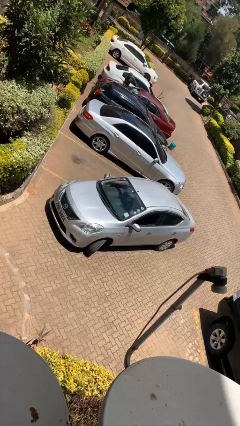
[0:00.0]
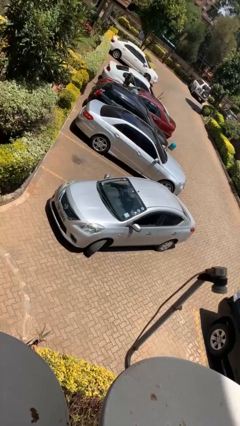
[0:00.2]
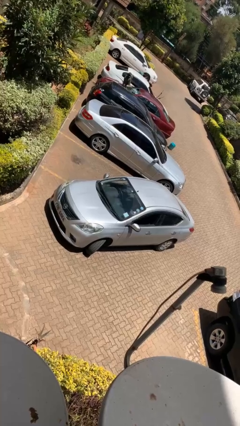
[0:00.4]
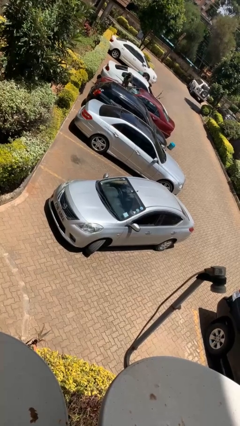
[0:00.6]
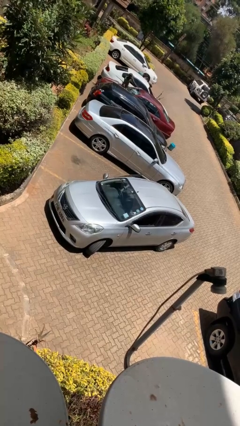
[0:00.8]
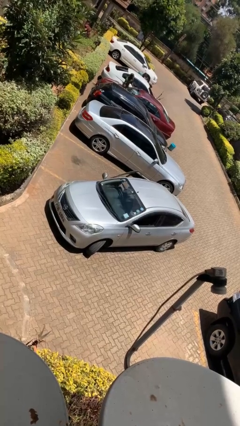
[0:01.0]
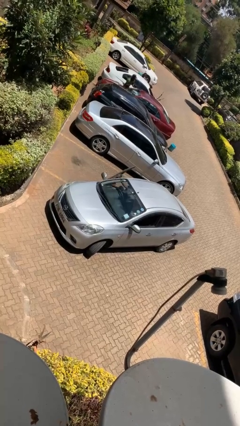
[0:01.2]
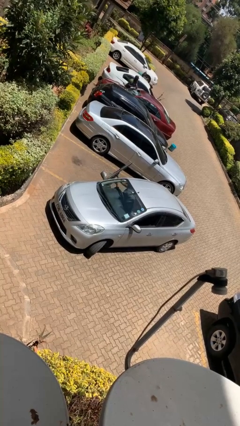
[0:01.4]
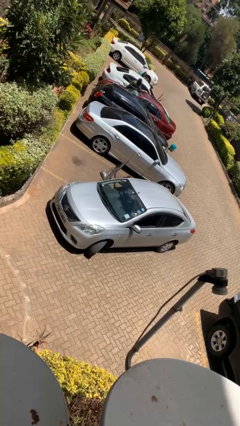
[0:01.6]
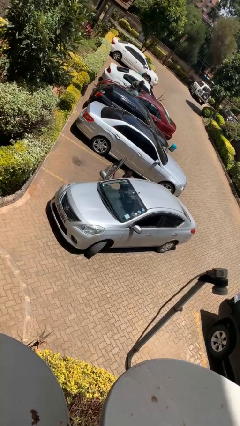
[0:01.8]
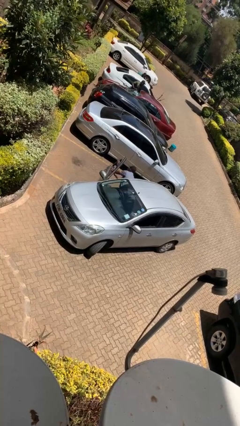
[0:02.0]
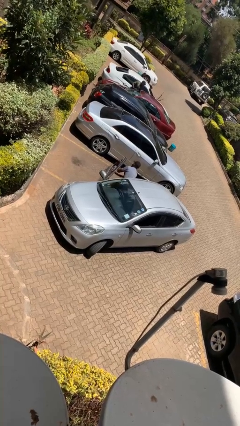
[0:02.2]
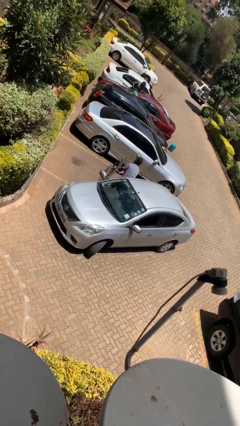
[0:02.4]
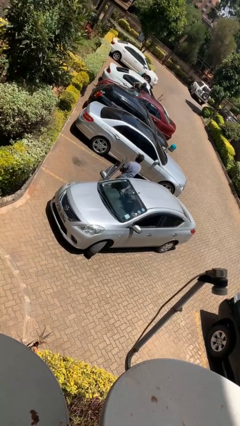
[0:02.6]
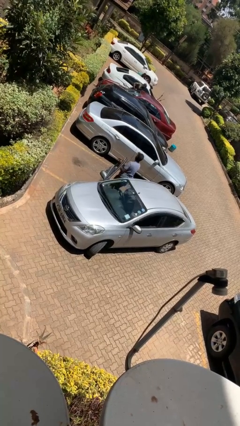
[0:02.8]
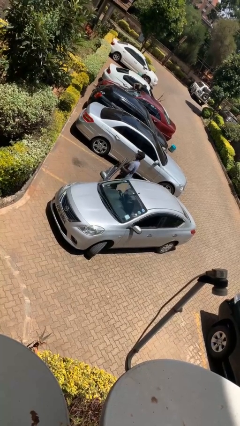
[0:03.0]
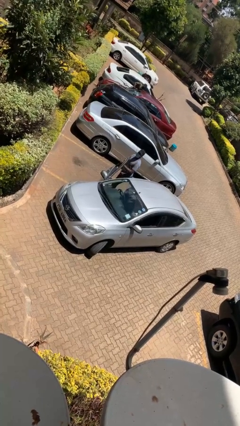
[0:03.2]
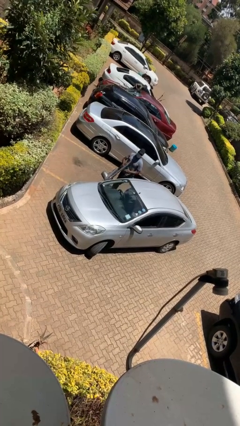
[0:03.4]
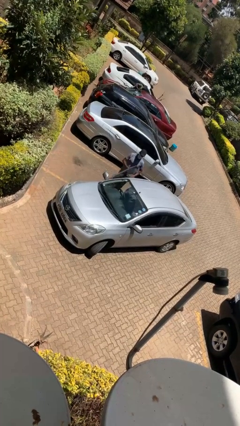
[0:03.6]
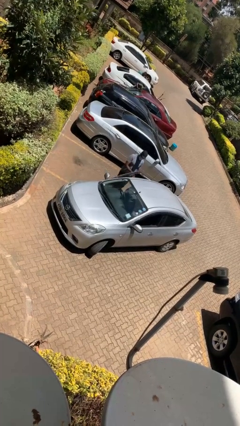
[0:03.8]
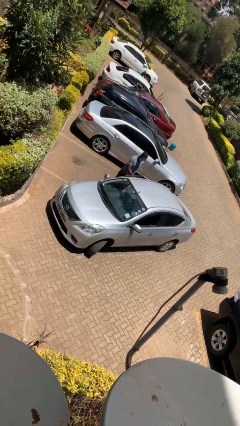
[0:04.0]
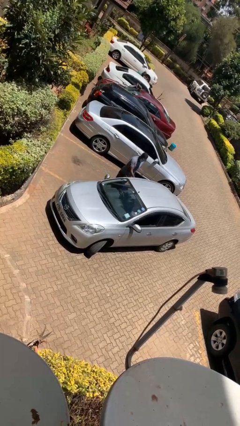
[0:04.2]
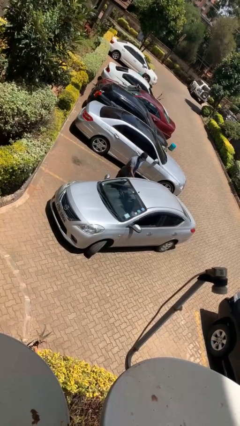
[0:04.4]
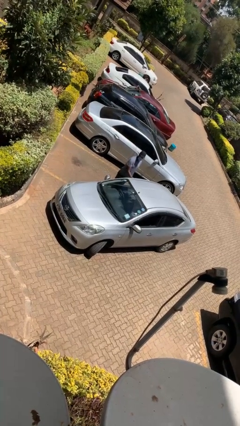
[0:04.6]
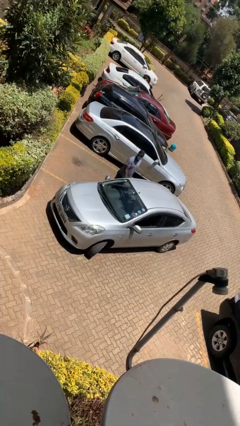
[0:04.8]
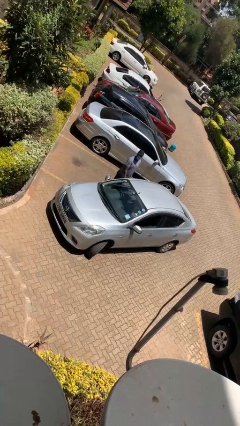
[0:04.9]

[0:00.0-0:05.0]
car drops off person

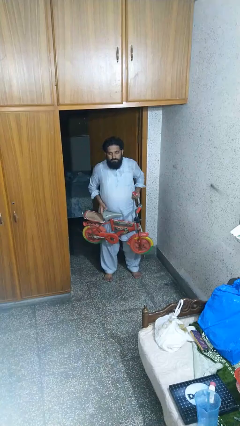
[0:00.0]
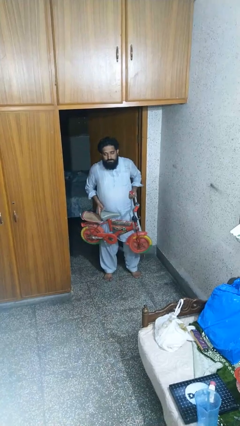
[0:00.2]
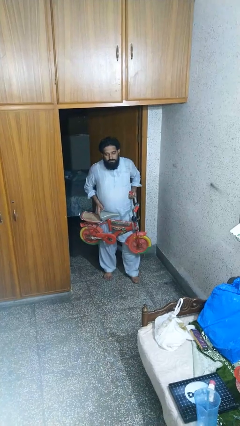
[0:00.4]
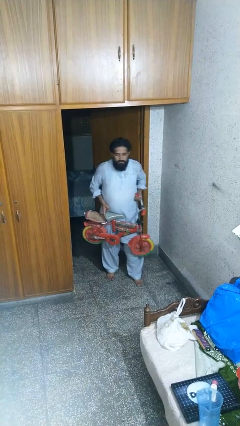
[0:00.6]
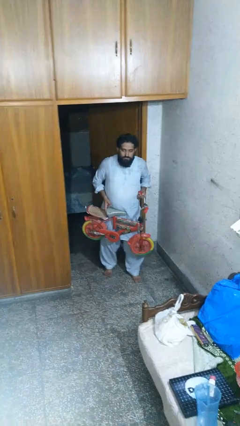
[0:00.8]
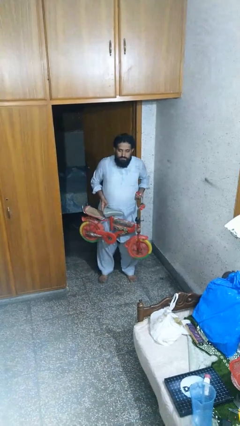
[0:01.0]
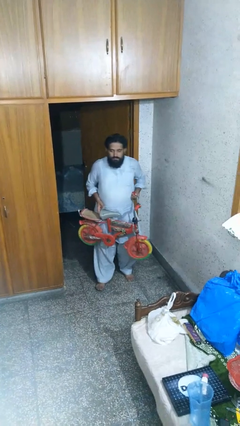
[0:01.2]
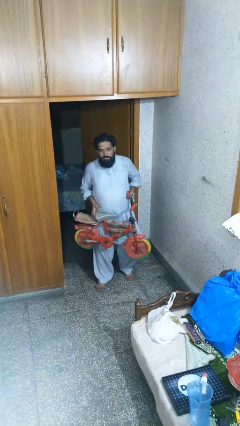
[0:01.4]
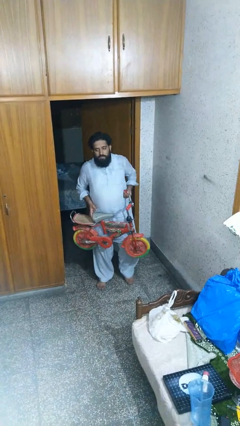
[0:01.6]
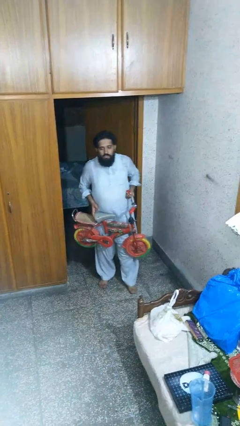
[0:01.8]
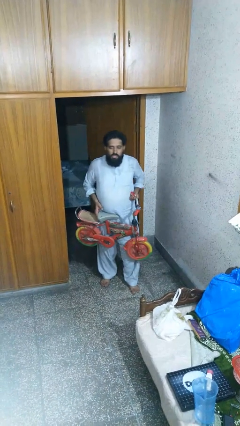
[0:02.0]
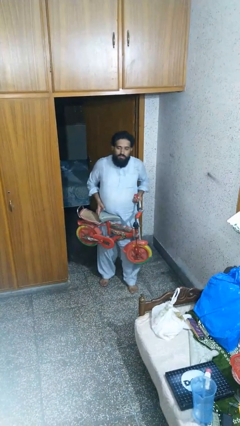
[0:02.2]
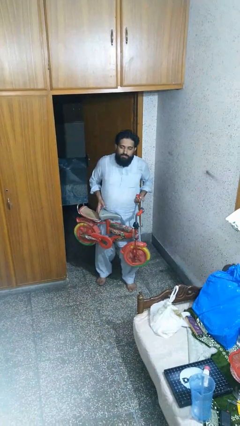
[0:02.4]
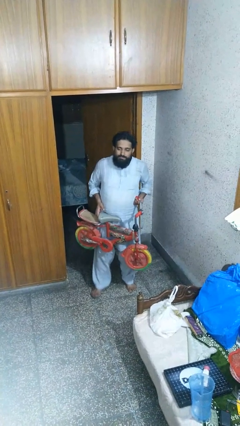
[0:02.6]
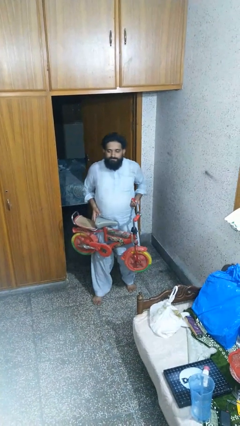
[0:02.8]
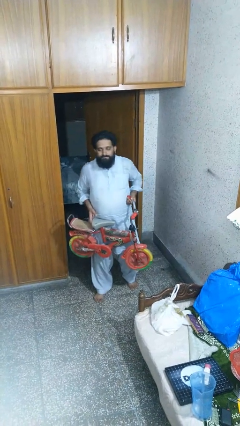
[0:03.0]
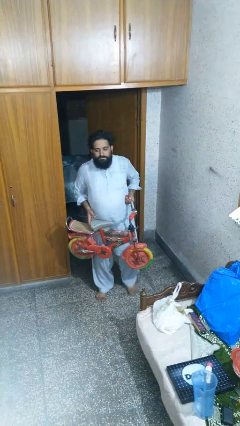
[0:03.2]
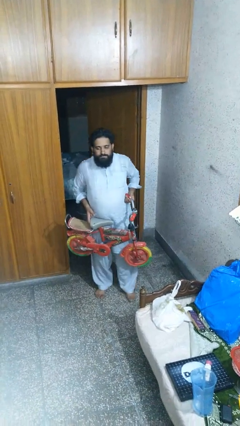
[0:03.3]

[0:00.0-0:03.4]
person carries bicycle

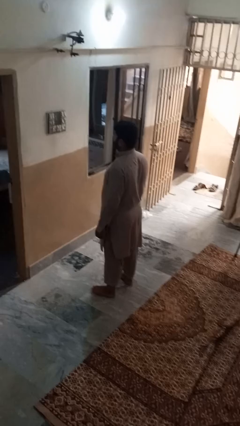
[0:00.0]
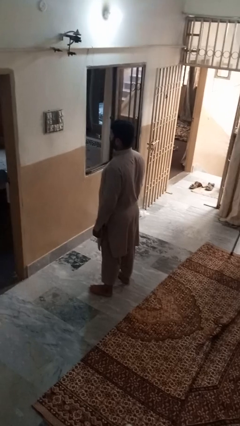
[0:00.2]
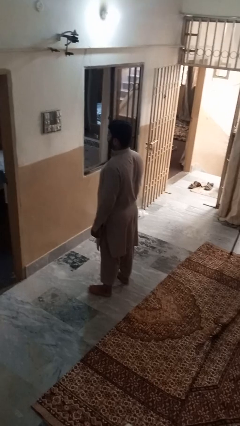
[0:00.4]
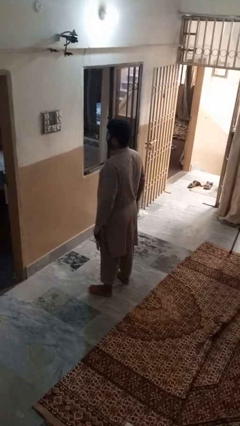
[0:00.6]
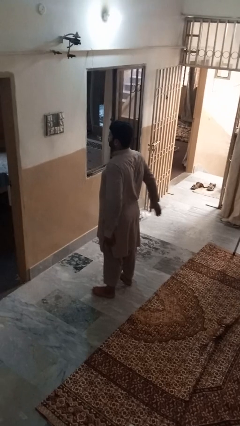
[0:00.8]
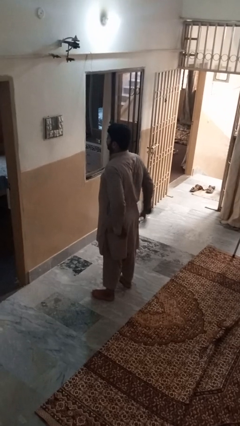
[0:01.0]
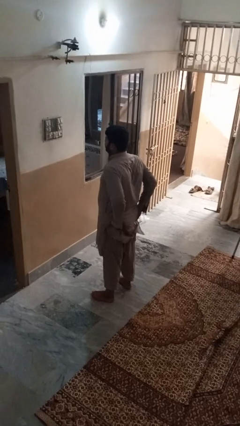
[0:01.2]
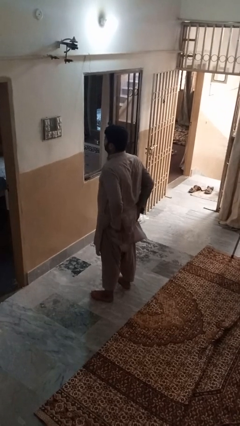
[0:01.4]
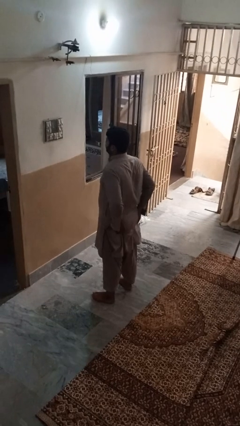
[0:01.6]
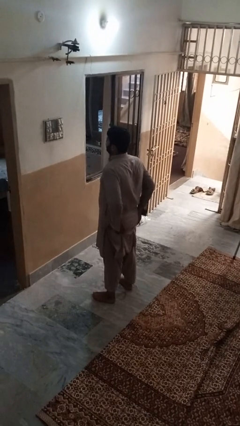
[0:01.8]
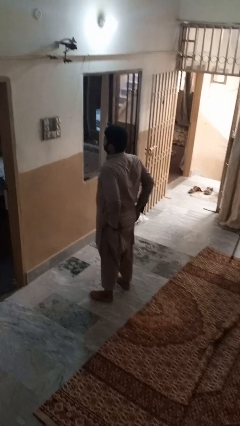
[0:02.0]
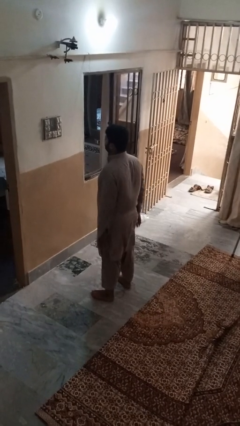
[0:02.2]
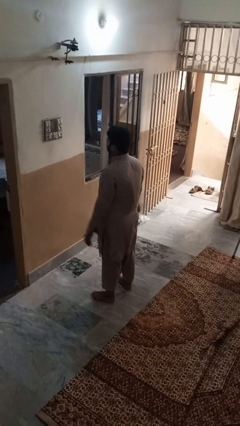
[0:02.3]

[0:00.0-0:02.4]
person wiggles hips

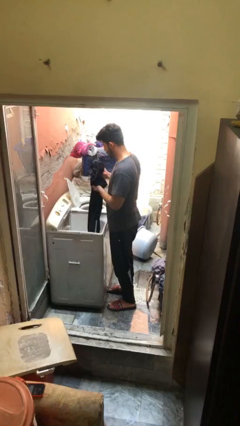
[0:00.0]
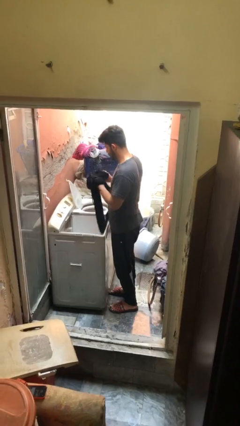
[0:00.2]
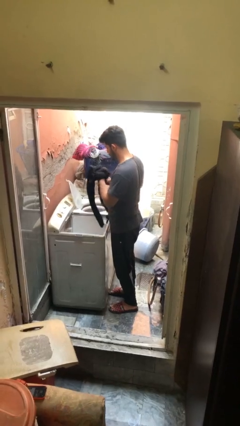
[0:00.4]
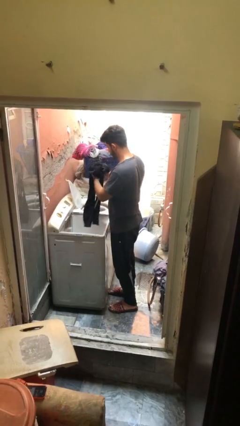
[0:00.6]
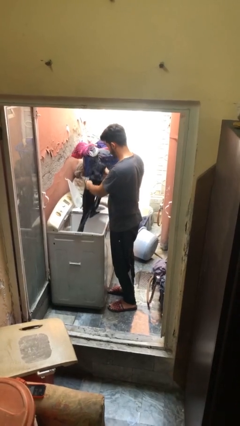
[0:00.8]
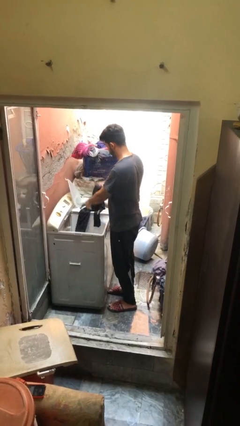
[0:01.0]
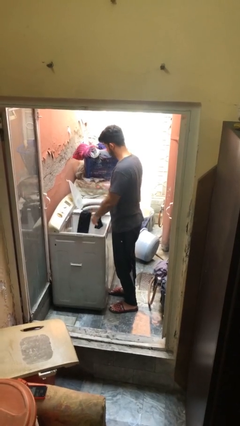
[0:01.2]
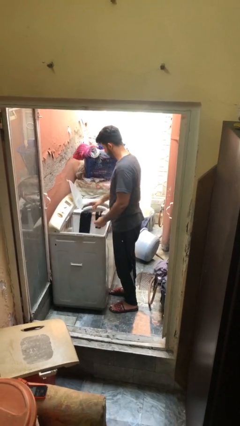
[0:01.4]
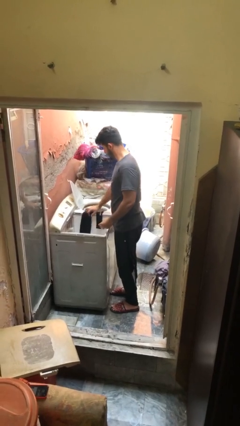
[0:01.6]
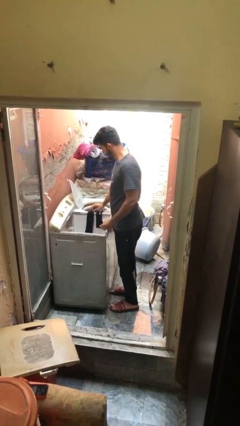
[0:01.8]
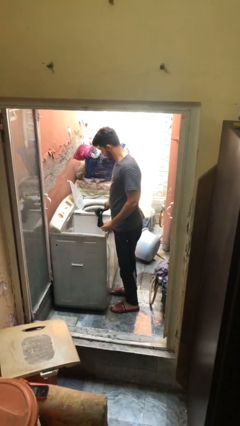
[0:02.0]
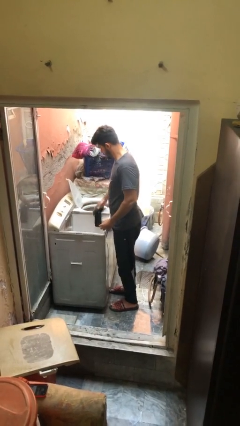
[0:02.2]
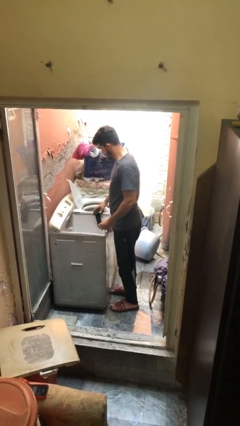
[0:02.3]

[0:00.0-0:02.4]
person loads dryer

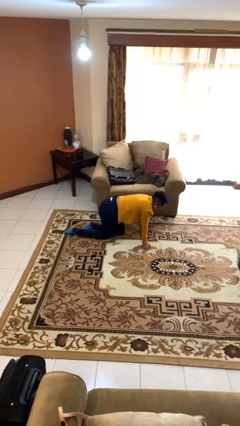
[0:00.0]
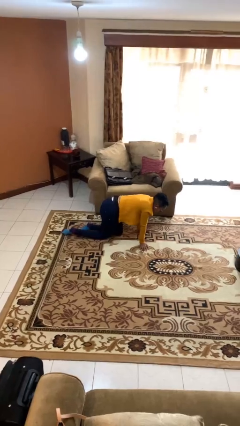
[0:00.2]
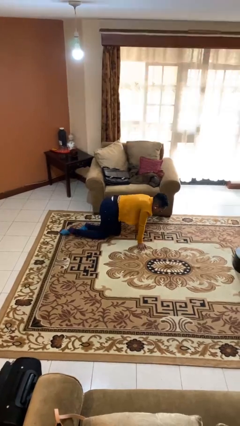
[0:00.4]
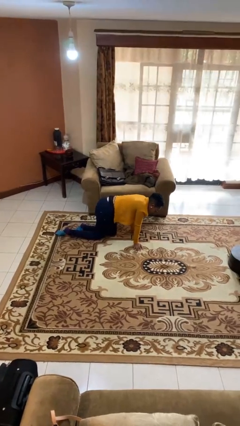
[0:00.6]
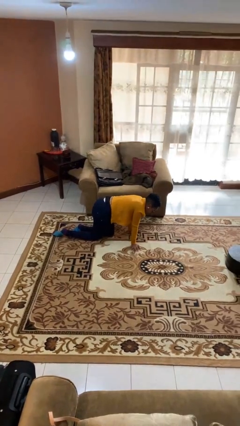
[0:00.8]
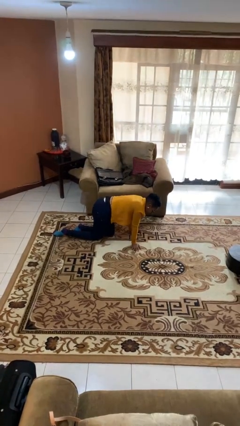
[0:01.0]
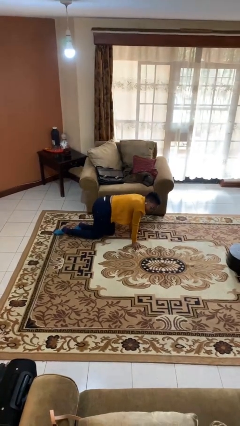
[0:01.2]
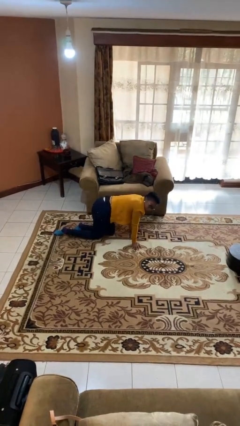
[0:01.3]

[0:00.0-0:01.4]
person crawls

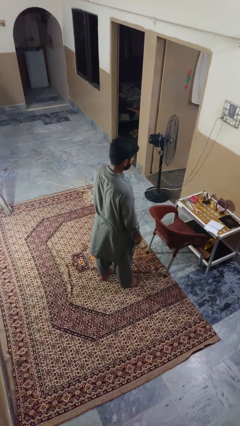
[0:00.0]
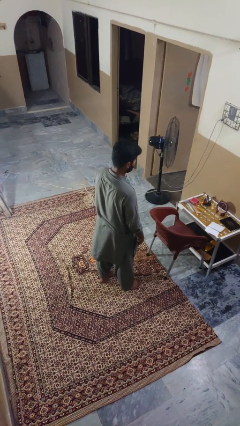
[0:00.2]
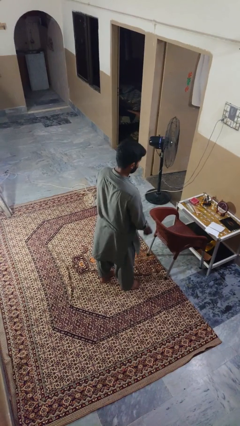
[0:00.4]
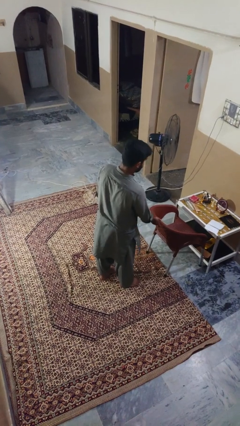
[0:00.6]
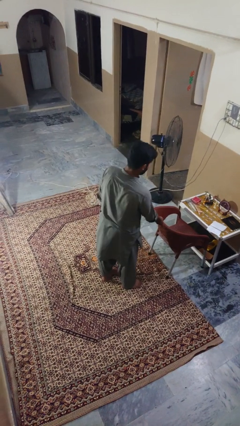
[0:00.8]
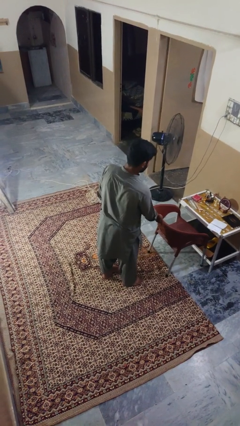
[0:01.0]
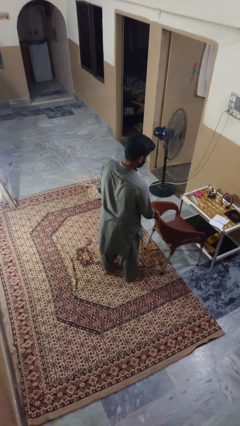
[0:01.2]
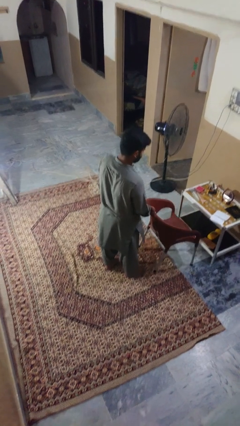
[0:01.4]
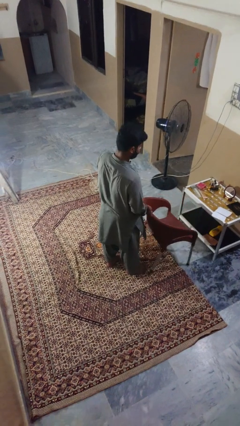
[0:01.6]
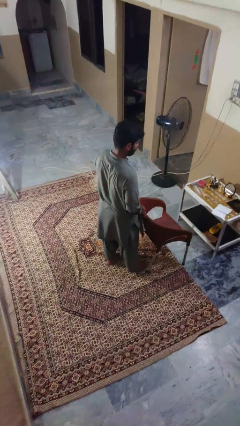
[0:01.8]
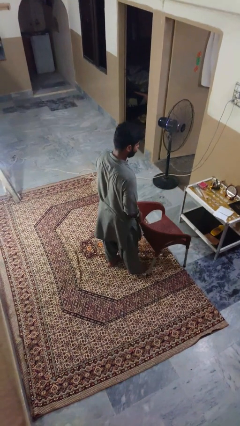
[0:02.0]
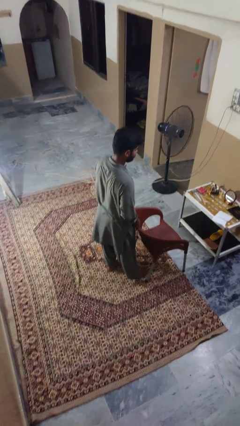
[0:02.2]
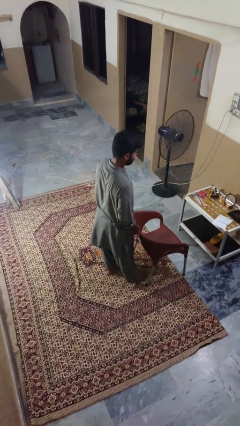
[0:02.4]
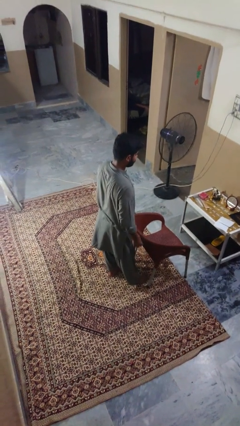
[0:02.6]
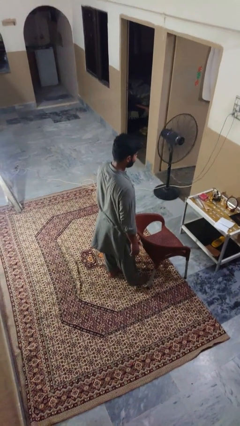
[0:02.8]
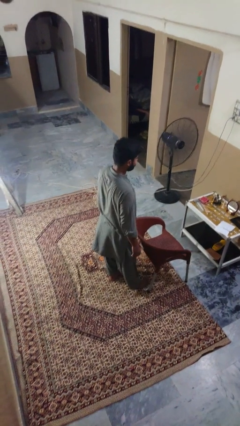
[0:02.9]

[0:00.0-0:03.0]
person pulls out chair
